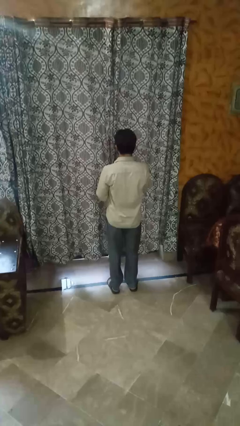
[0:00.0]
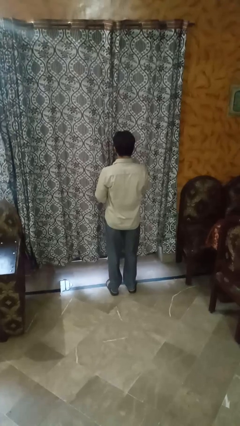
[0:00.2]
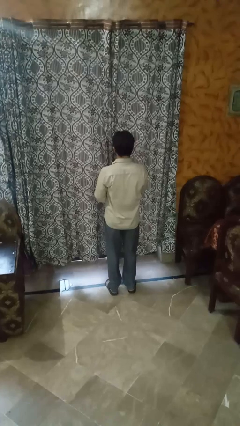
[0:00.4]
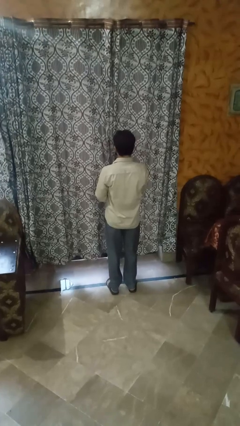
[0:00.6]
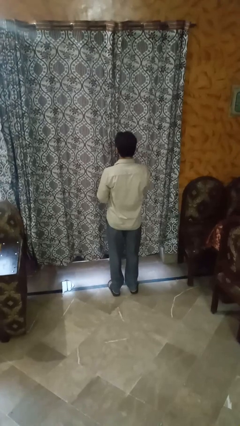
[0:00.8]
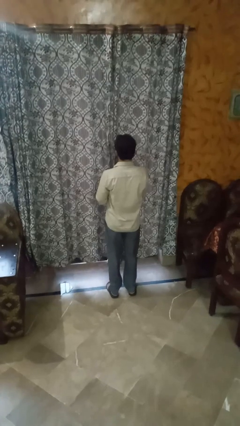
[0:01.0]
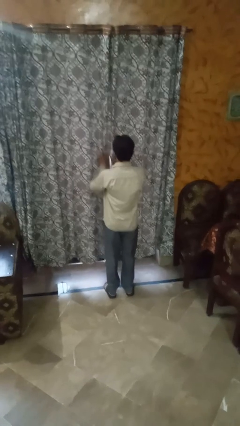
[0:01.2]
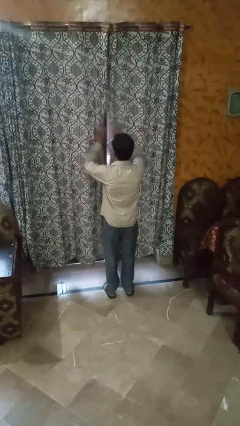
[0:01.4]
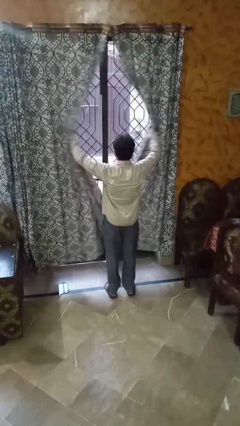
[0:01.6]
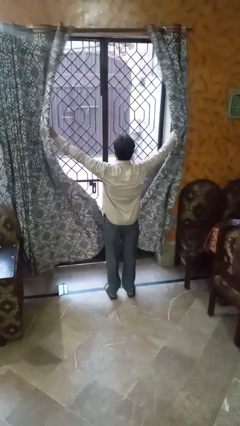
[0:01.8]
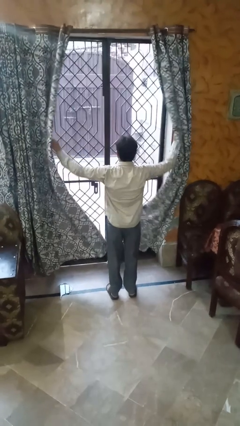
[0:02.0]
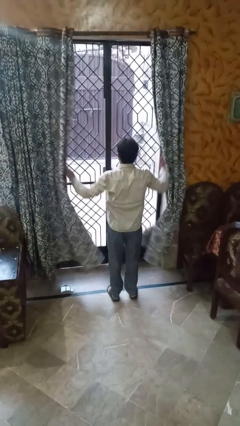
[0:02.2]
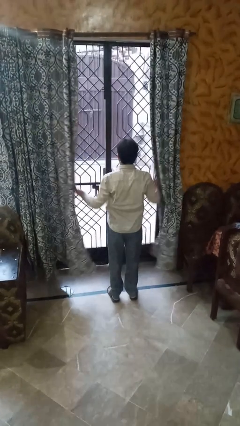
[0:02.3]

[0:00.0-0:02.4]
person opens curtains

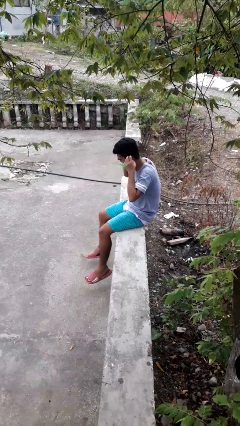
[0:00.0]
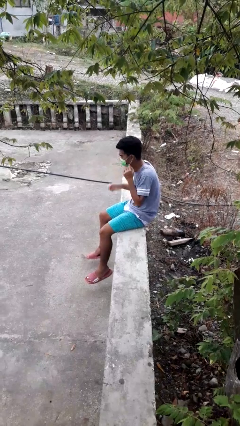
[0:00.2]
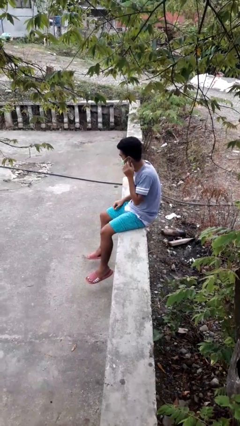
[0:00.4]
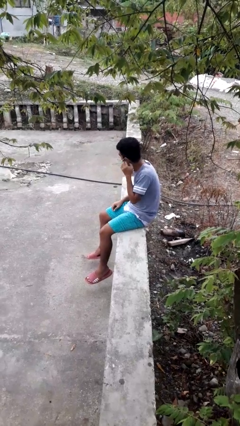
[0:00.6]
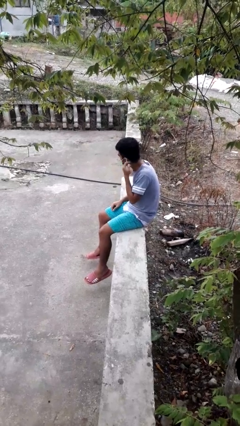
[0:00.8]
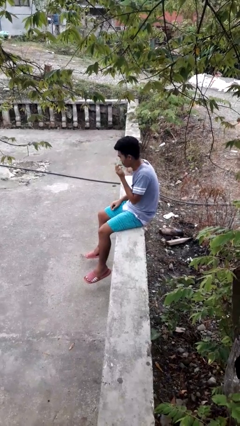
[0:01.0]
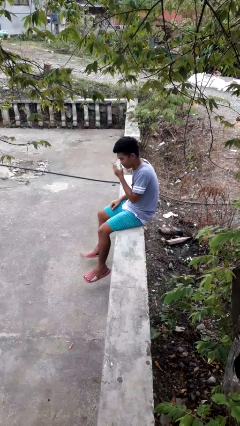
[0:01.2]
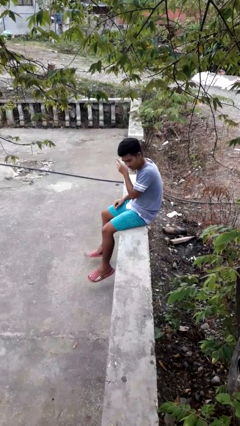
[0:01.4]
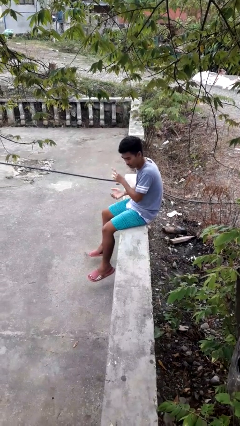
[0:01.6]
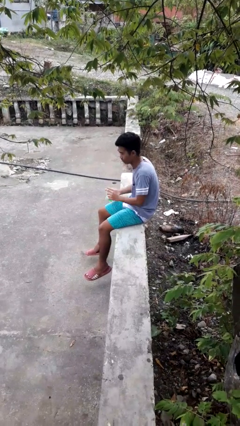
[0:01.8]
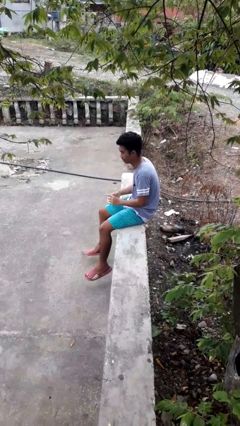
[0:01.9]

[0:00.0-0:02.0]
person takes off facemask

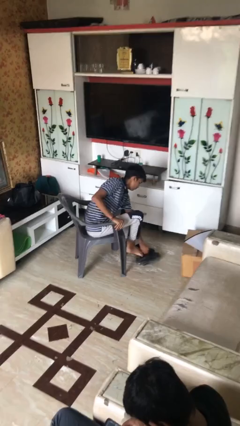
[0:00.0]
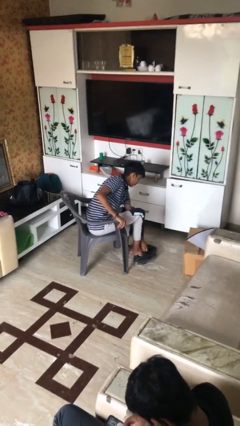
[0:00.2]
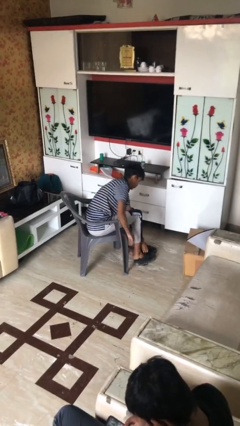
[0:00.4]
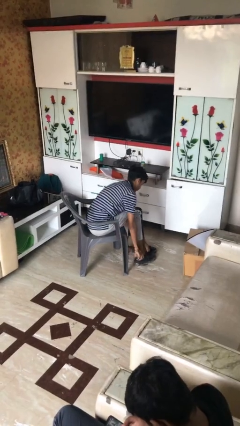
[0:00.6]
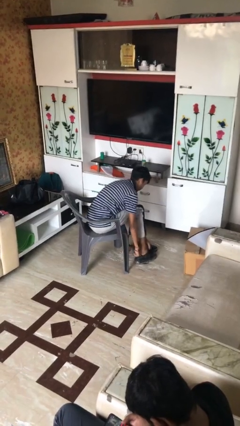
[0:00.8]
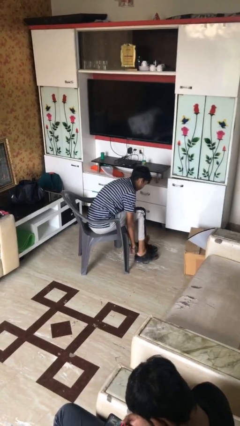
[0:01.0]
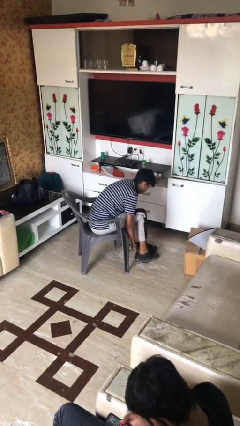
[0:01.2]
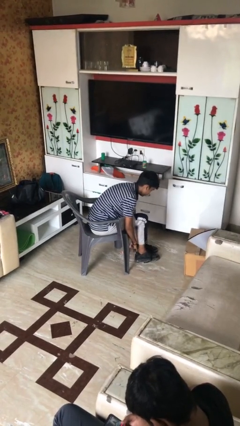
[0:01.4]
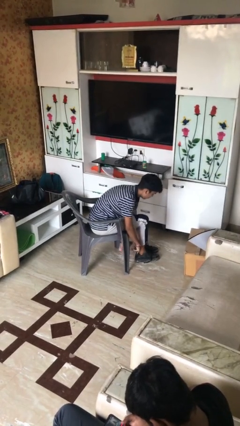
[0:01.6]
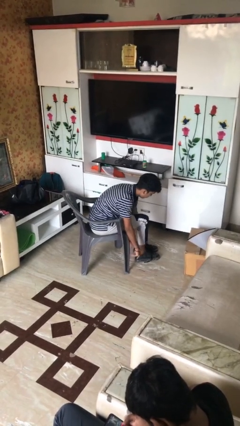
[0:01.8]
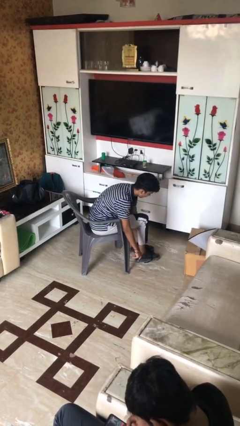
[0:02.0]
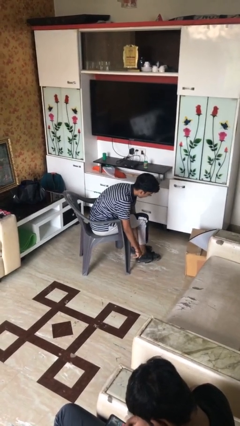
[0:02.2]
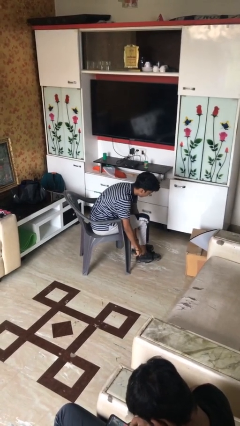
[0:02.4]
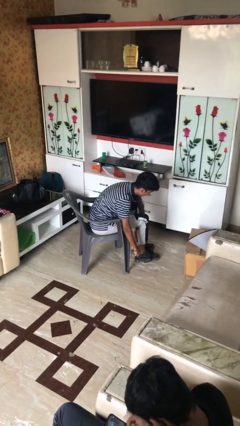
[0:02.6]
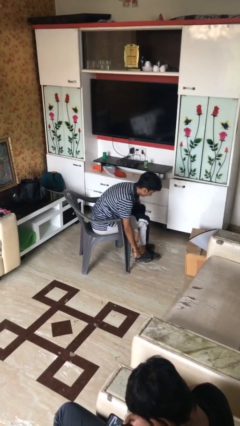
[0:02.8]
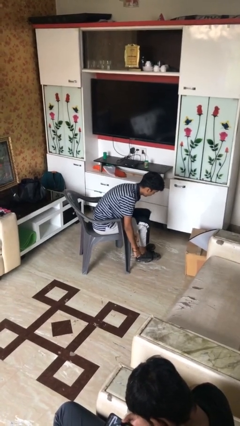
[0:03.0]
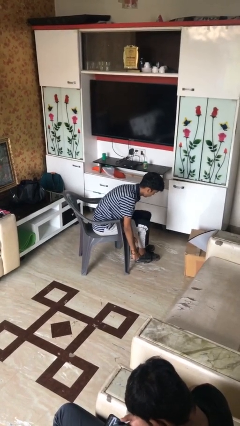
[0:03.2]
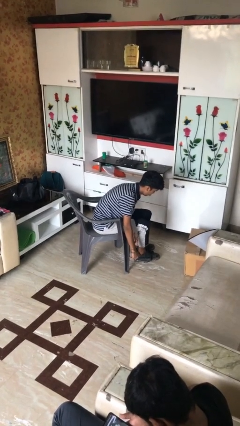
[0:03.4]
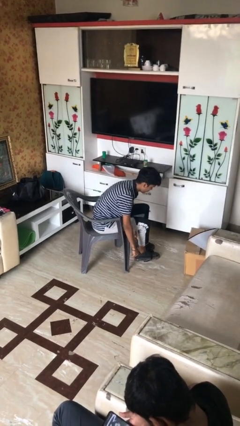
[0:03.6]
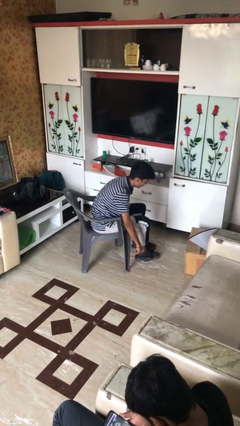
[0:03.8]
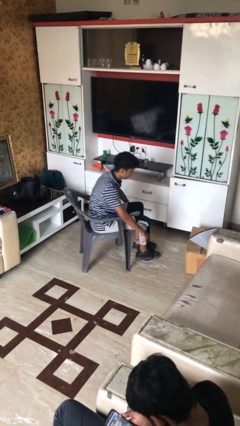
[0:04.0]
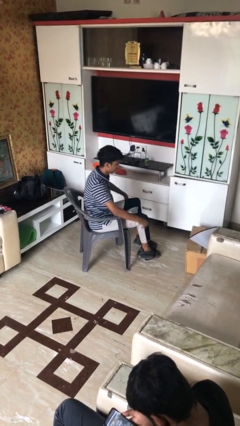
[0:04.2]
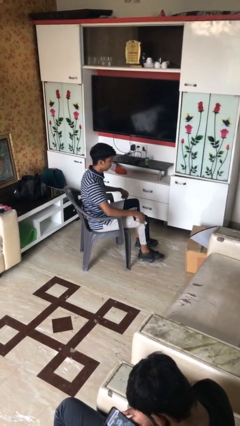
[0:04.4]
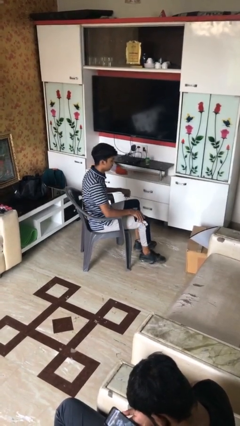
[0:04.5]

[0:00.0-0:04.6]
person puts on shoes

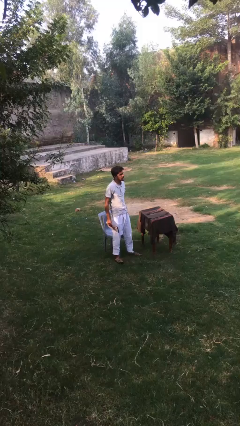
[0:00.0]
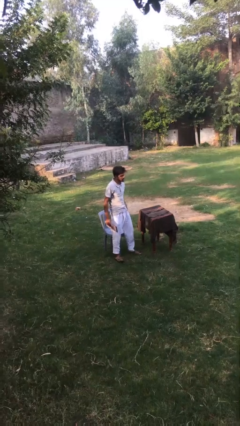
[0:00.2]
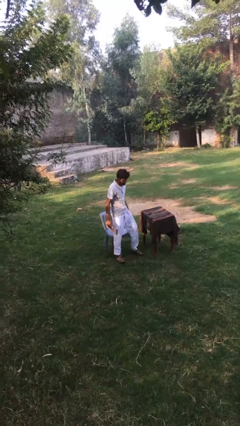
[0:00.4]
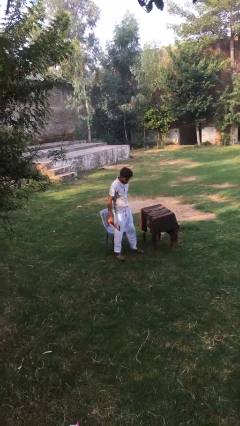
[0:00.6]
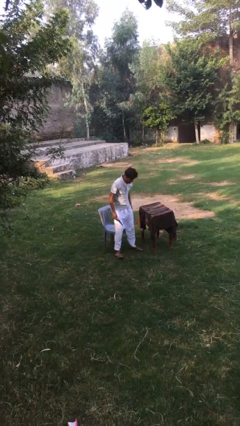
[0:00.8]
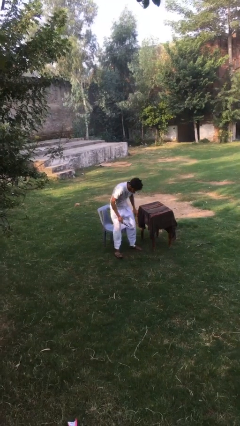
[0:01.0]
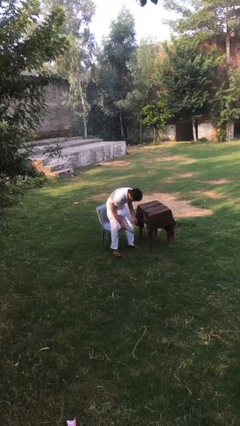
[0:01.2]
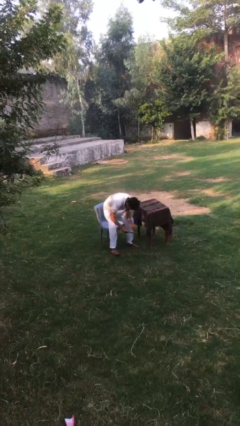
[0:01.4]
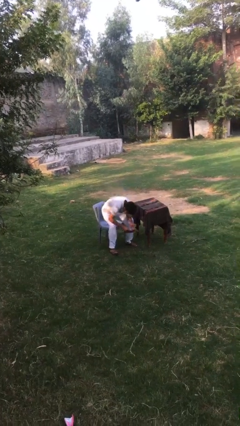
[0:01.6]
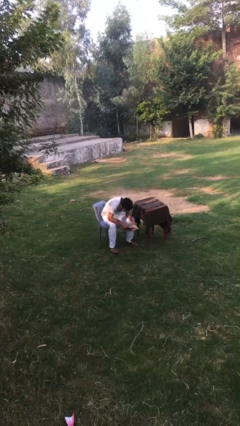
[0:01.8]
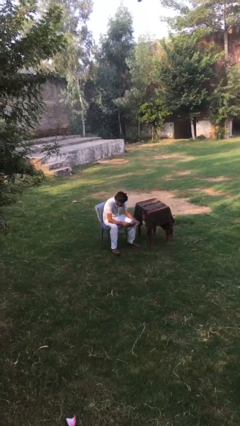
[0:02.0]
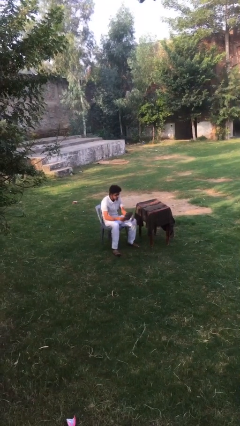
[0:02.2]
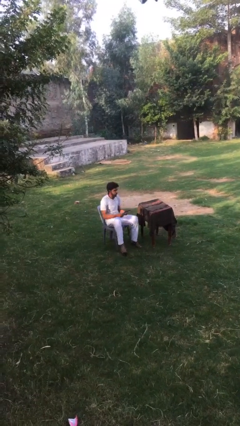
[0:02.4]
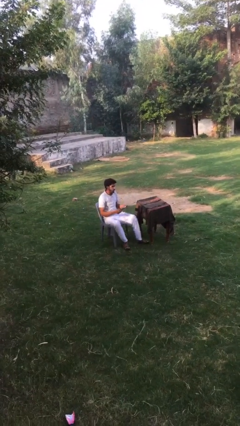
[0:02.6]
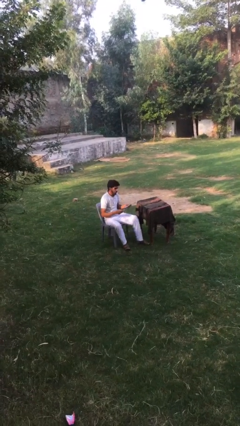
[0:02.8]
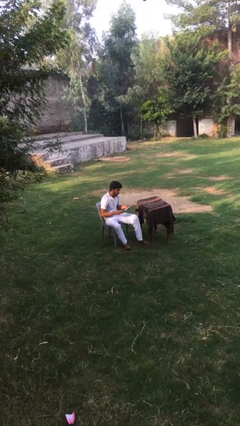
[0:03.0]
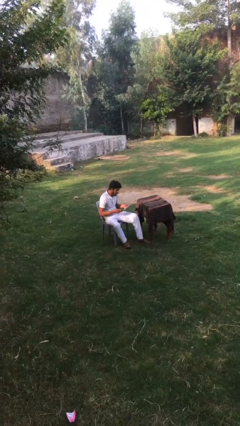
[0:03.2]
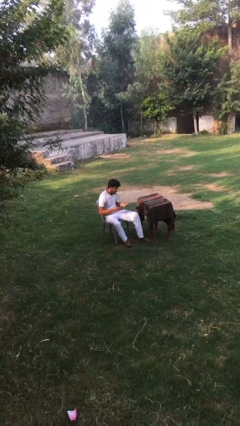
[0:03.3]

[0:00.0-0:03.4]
person sits down

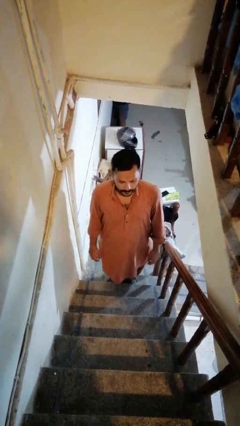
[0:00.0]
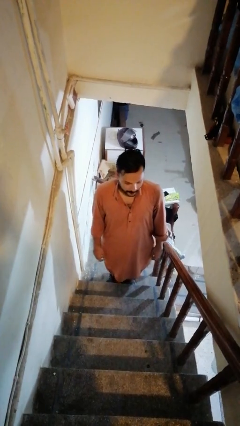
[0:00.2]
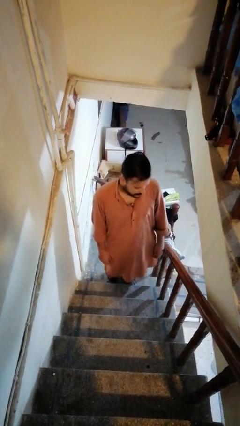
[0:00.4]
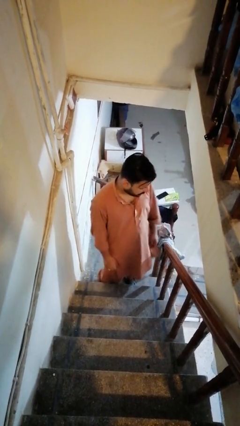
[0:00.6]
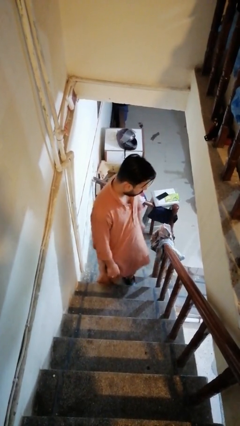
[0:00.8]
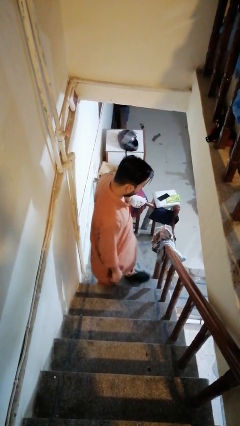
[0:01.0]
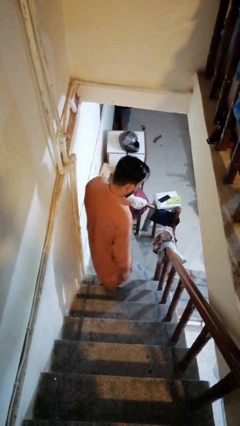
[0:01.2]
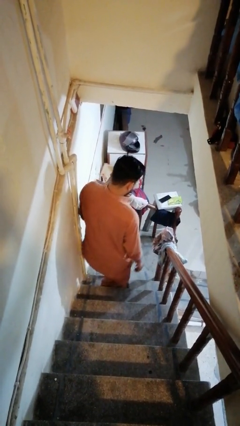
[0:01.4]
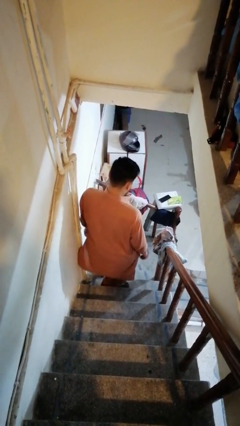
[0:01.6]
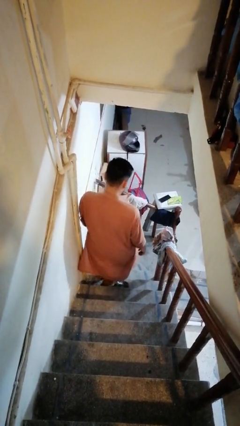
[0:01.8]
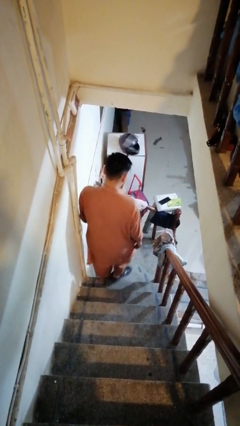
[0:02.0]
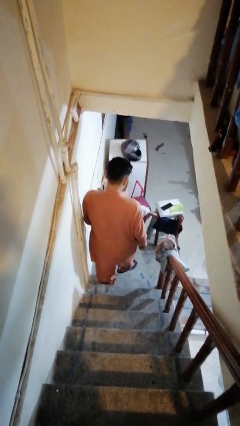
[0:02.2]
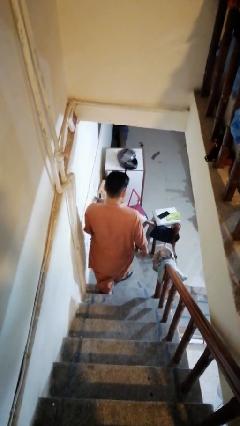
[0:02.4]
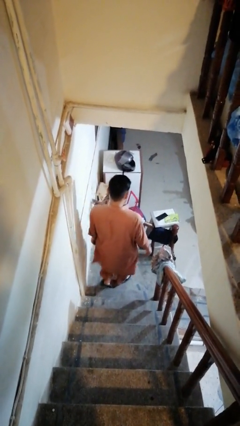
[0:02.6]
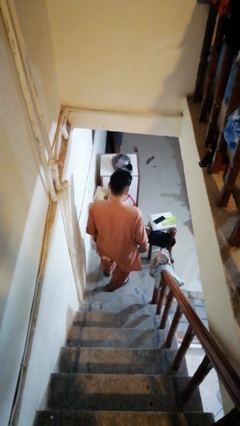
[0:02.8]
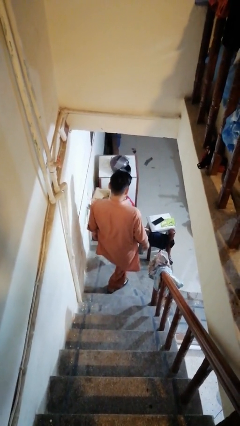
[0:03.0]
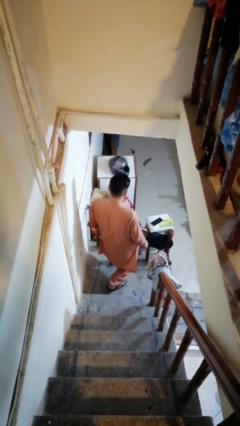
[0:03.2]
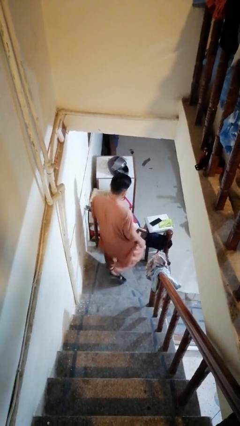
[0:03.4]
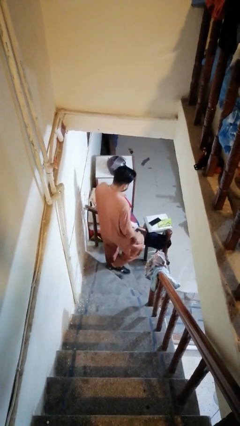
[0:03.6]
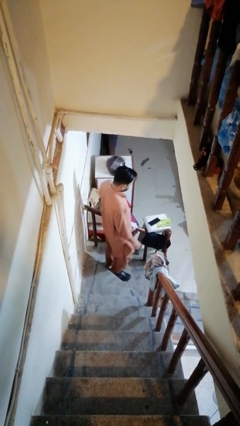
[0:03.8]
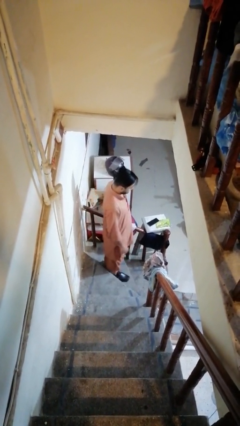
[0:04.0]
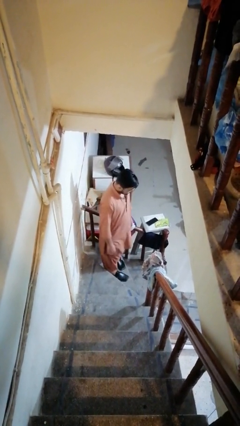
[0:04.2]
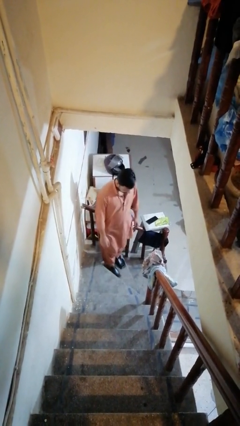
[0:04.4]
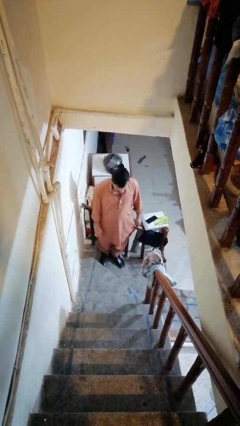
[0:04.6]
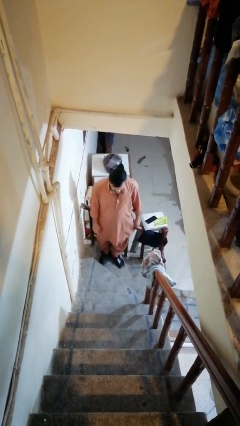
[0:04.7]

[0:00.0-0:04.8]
person climbs down stairs

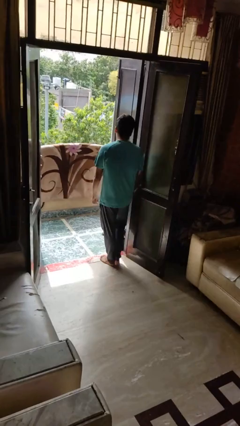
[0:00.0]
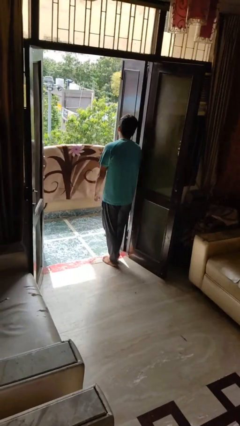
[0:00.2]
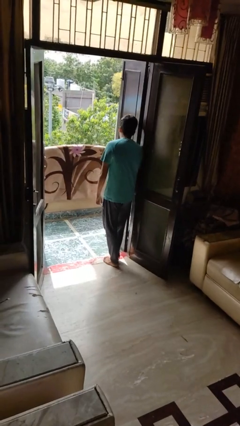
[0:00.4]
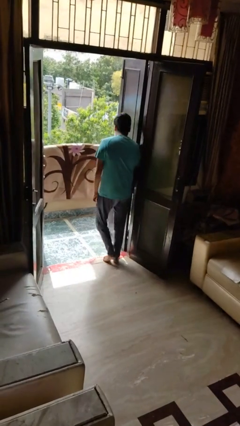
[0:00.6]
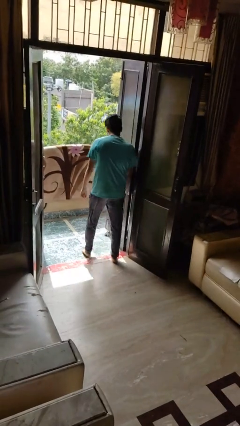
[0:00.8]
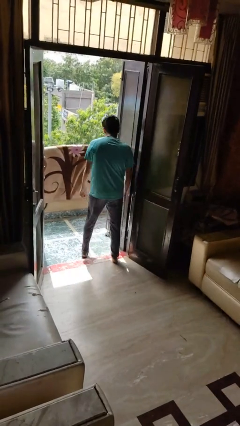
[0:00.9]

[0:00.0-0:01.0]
person bumps into wall
